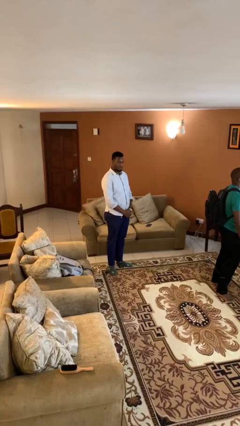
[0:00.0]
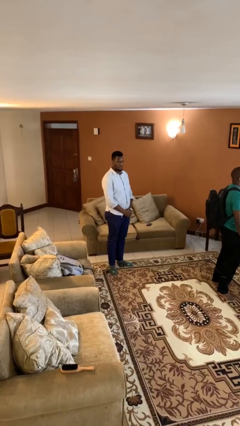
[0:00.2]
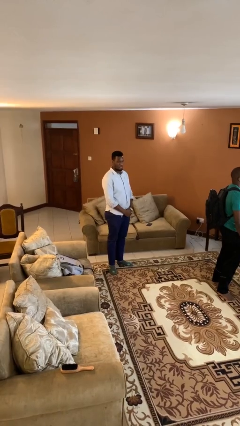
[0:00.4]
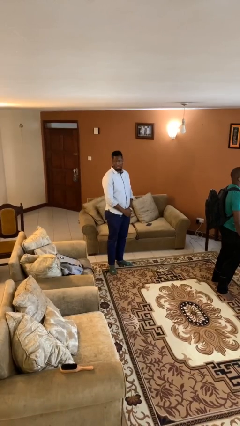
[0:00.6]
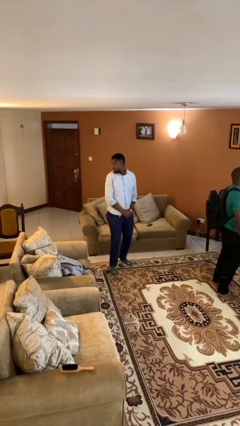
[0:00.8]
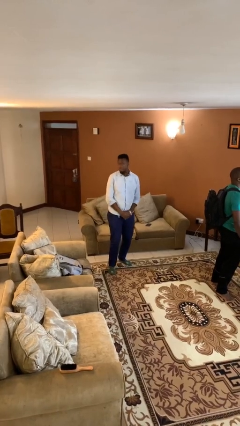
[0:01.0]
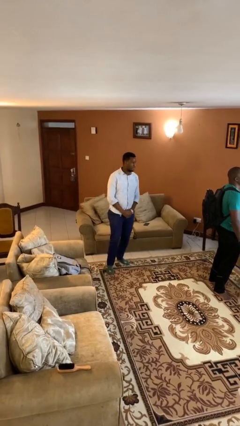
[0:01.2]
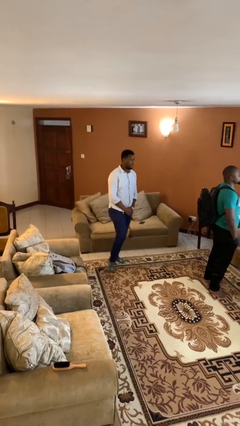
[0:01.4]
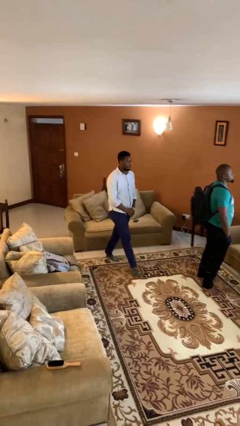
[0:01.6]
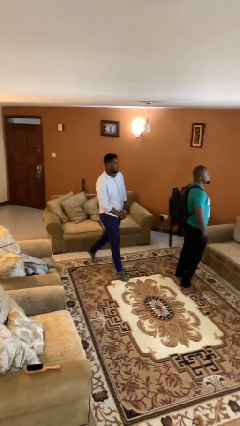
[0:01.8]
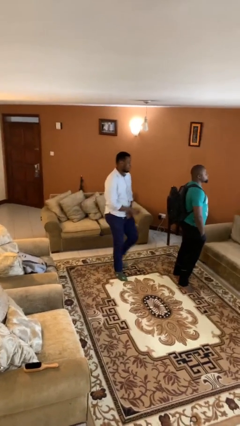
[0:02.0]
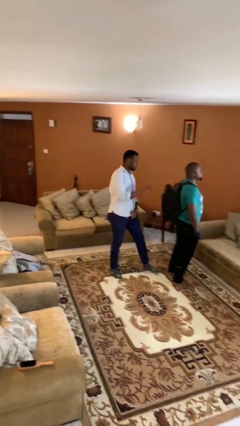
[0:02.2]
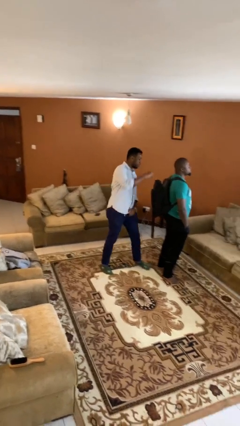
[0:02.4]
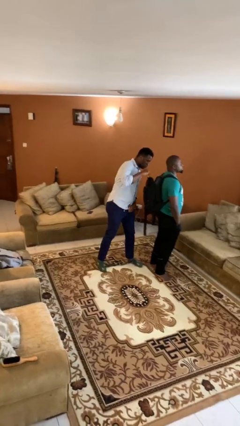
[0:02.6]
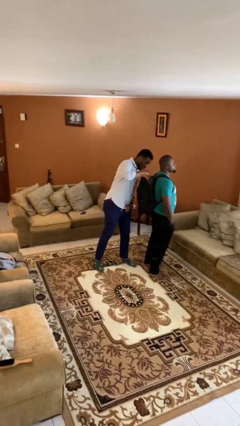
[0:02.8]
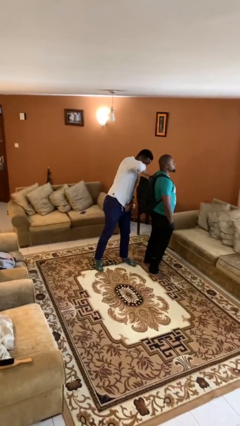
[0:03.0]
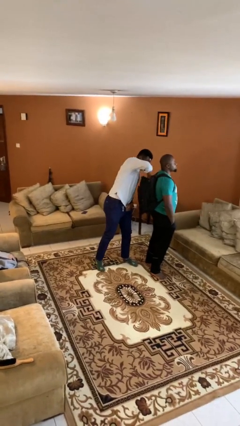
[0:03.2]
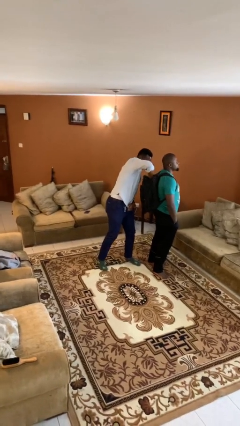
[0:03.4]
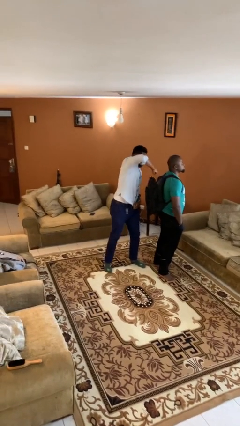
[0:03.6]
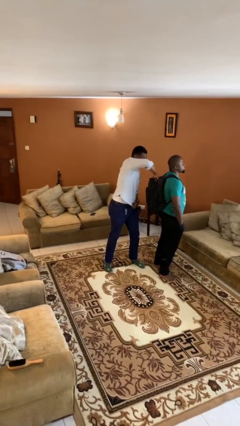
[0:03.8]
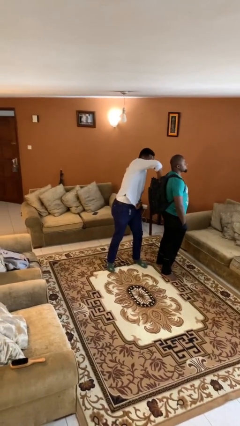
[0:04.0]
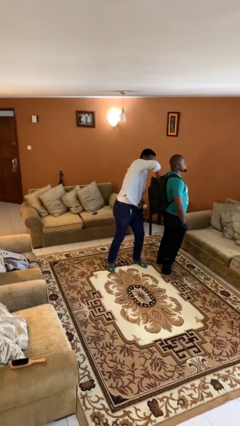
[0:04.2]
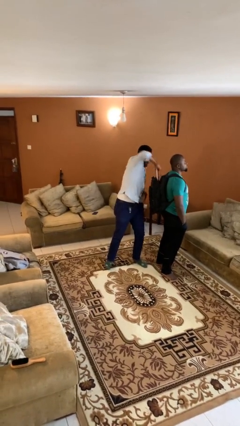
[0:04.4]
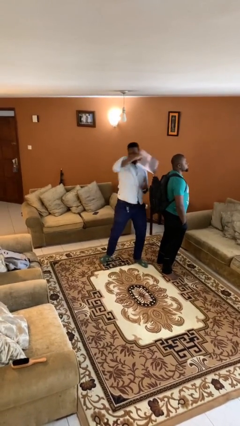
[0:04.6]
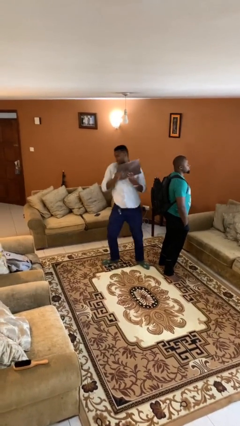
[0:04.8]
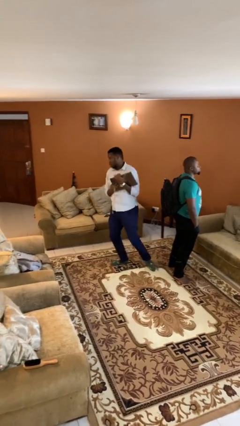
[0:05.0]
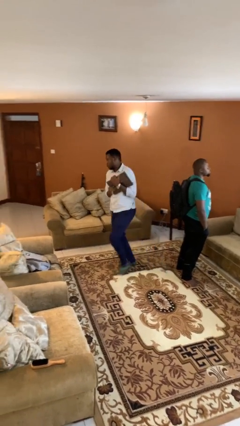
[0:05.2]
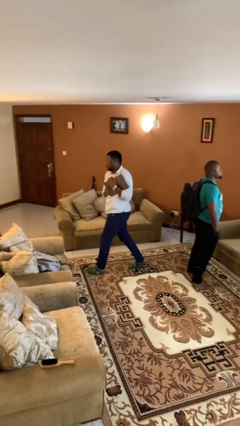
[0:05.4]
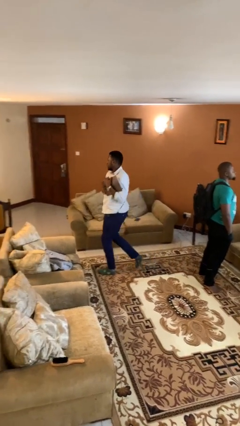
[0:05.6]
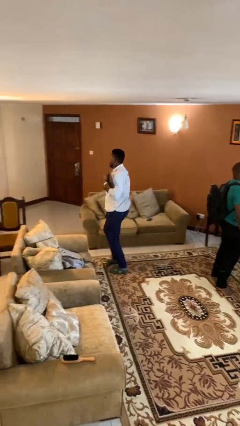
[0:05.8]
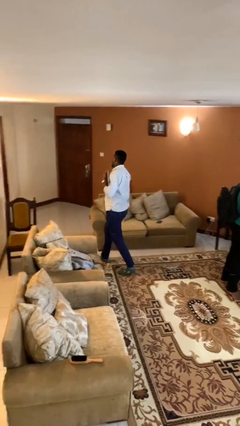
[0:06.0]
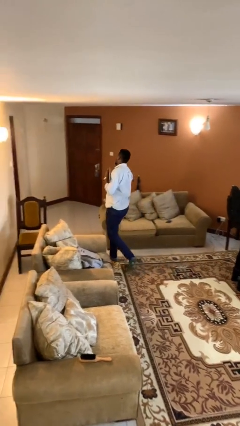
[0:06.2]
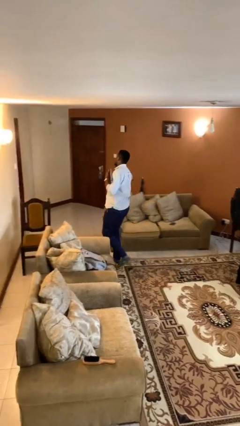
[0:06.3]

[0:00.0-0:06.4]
person steals object from person

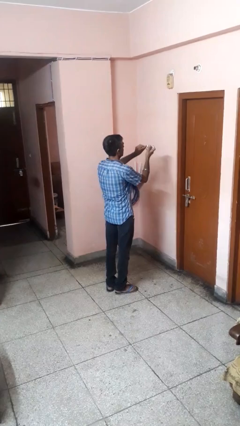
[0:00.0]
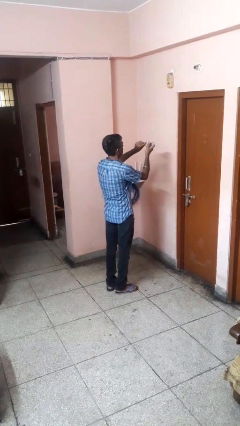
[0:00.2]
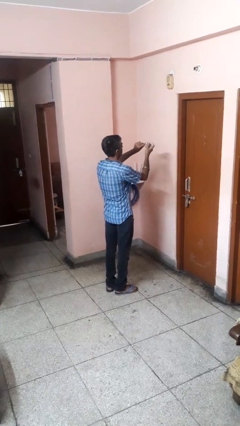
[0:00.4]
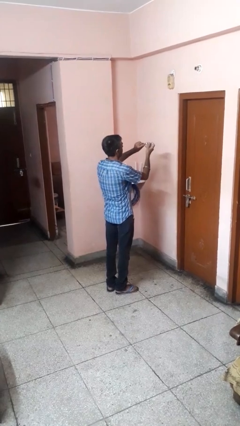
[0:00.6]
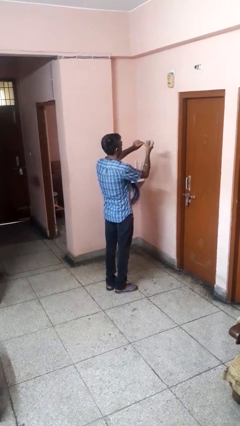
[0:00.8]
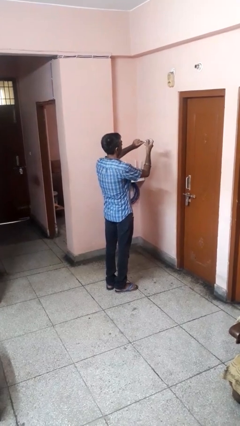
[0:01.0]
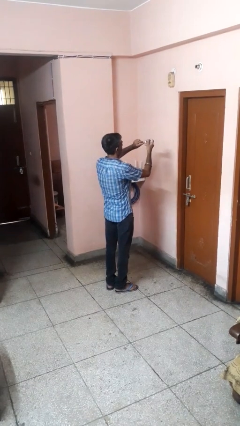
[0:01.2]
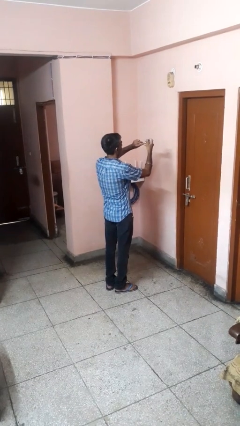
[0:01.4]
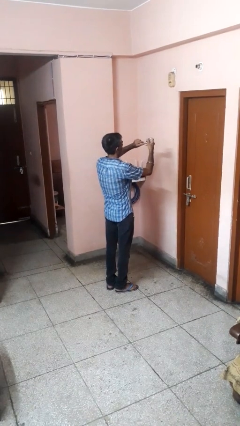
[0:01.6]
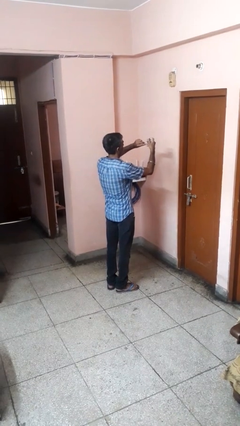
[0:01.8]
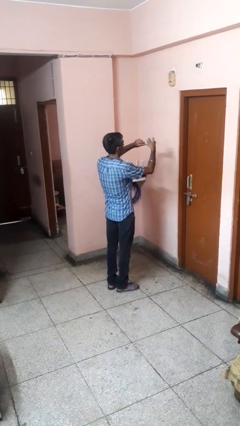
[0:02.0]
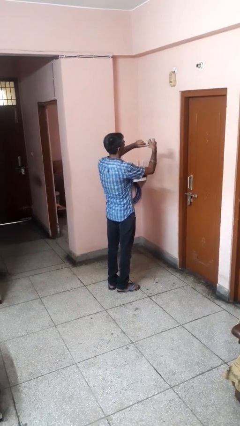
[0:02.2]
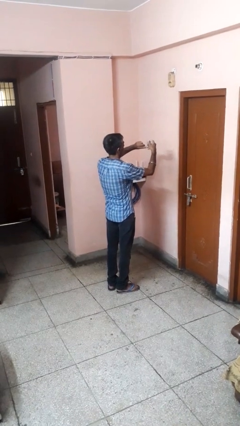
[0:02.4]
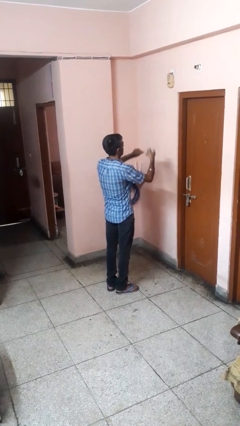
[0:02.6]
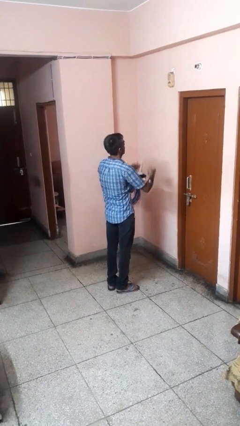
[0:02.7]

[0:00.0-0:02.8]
person clips fingernails

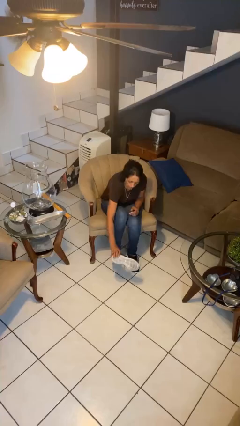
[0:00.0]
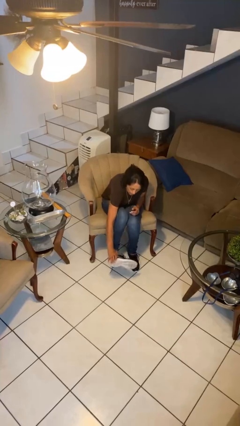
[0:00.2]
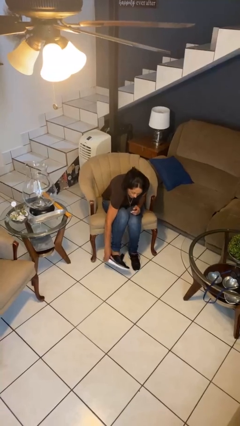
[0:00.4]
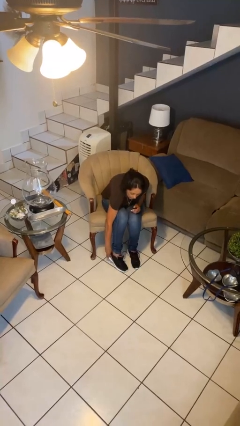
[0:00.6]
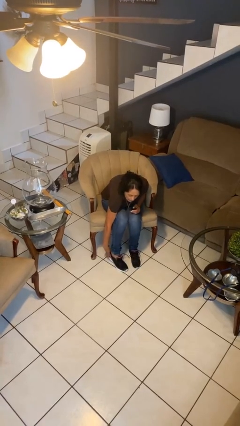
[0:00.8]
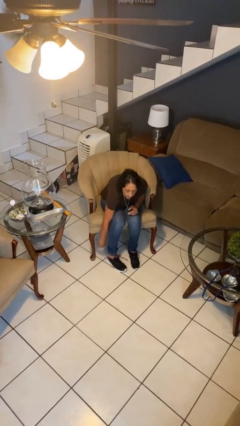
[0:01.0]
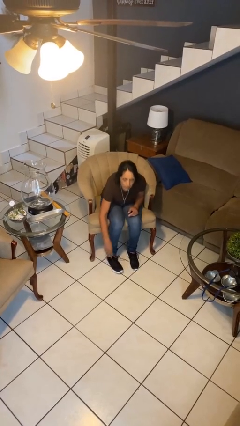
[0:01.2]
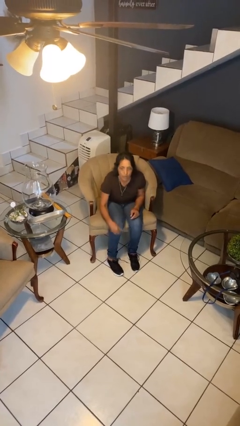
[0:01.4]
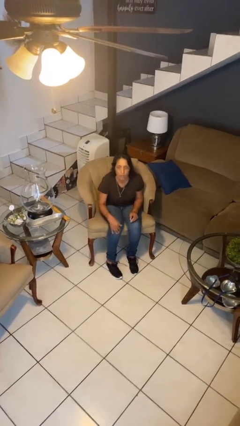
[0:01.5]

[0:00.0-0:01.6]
person puts on shoes

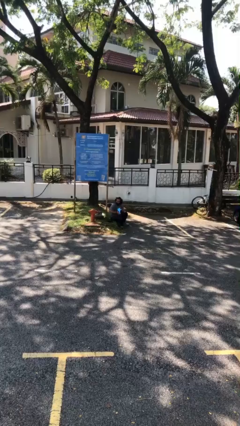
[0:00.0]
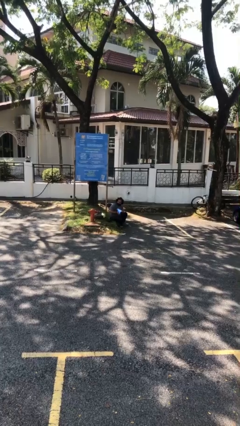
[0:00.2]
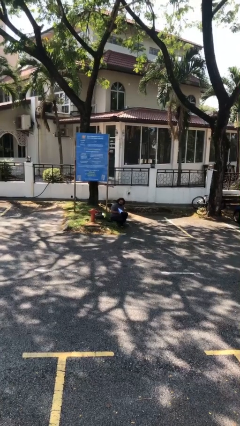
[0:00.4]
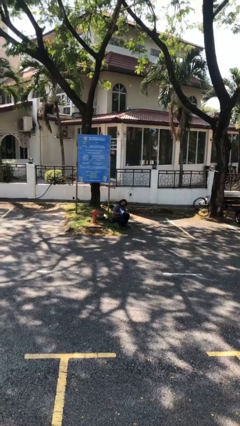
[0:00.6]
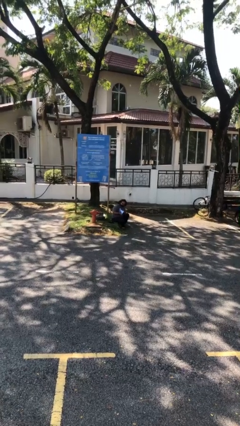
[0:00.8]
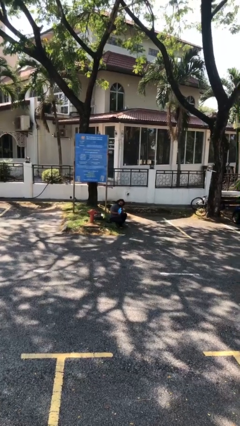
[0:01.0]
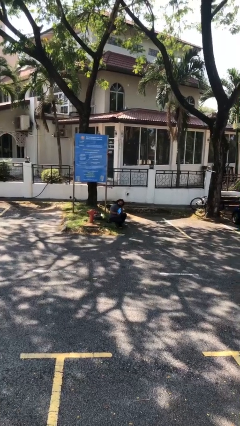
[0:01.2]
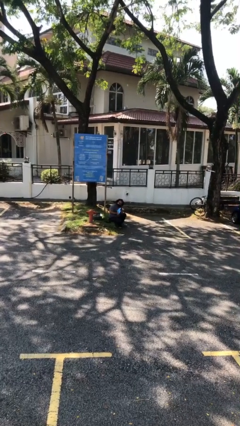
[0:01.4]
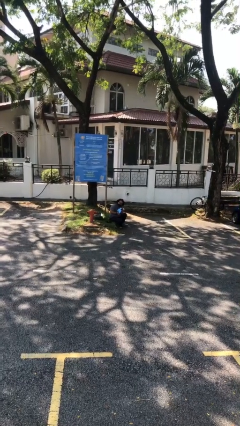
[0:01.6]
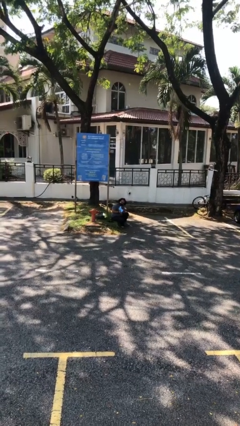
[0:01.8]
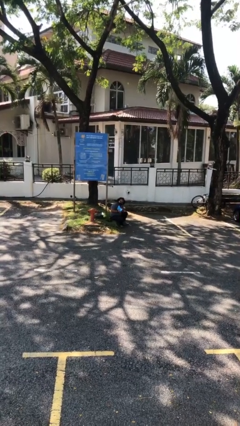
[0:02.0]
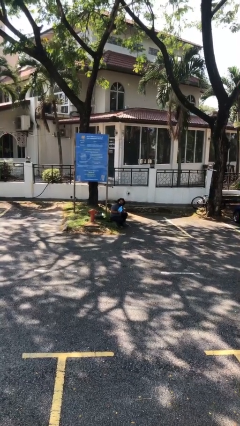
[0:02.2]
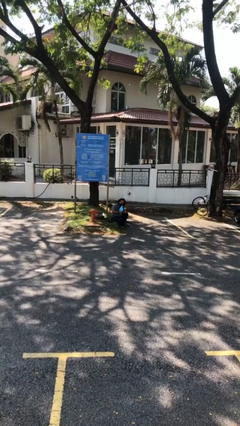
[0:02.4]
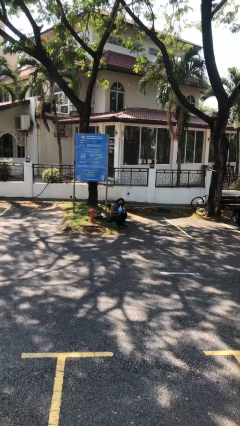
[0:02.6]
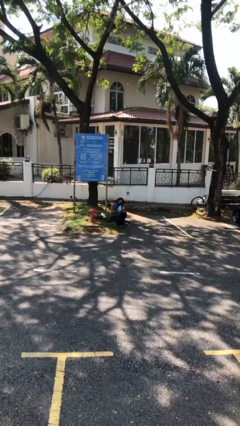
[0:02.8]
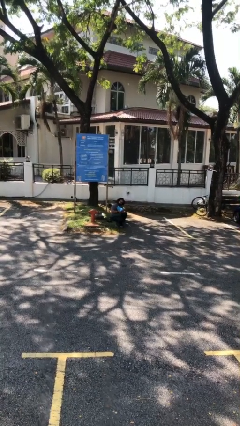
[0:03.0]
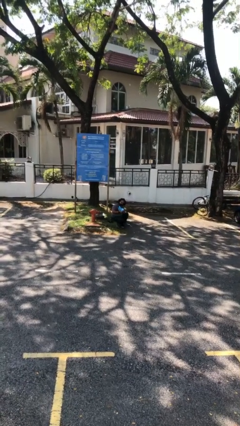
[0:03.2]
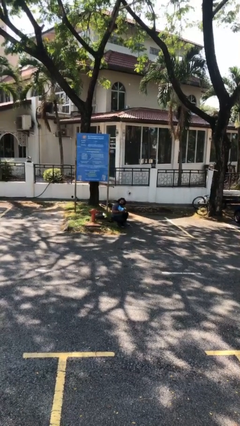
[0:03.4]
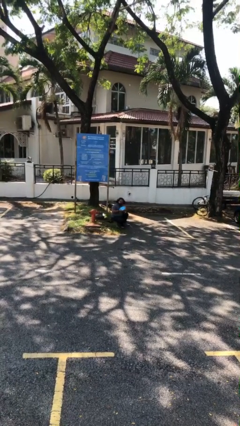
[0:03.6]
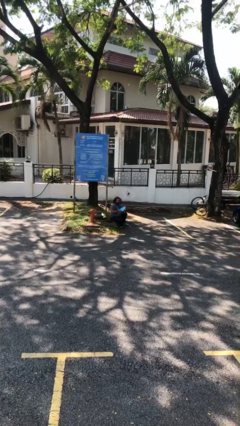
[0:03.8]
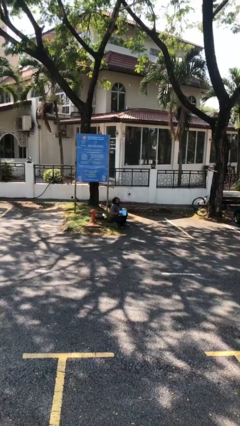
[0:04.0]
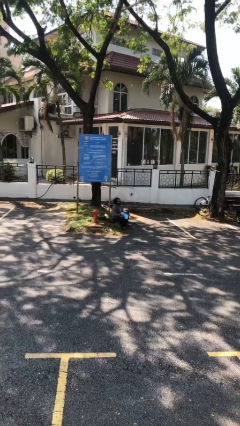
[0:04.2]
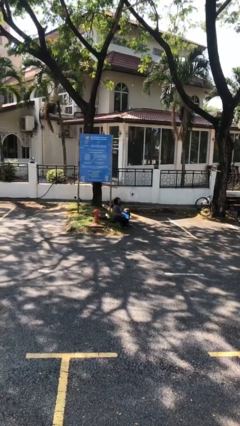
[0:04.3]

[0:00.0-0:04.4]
person reads document

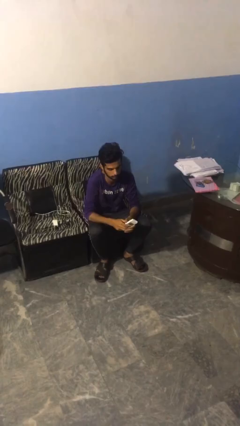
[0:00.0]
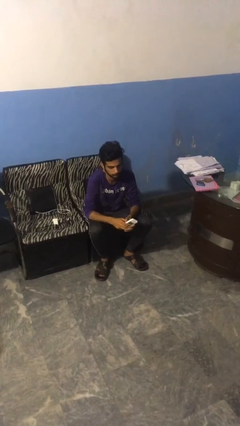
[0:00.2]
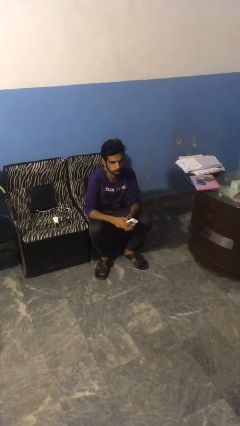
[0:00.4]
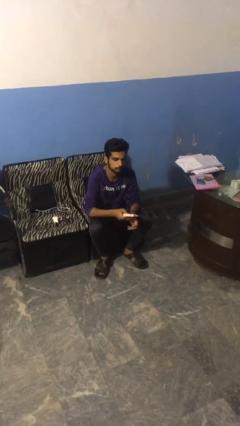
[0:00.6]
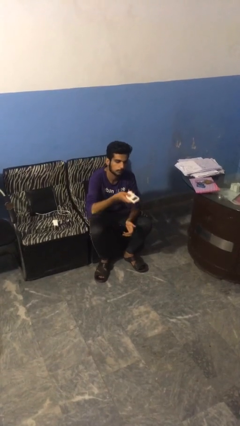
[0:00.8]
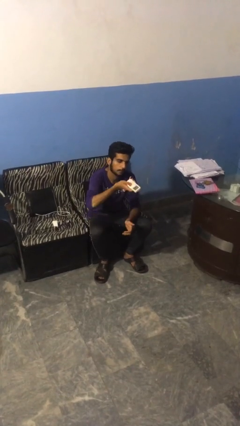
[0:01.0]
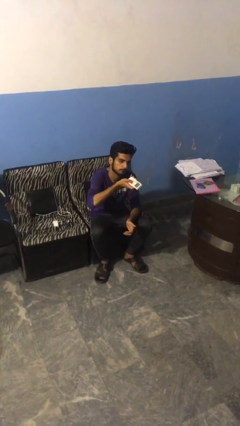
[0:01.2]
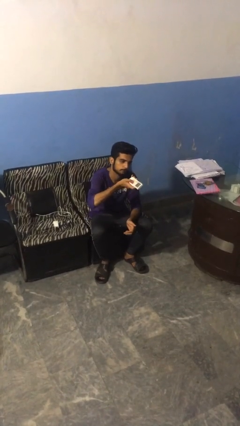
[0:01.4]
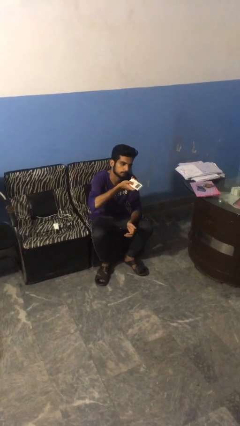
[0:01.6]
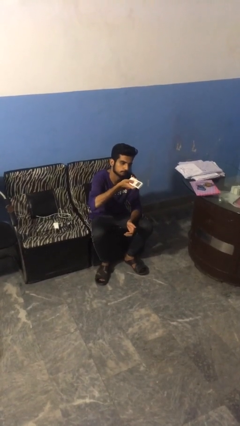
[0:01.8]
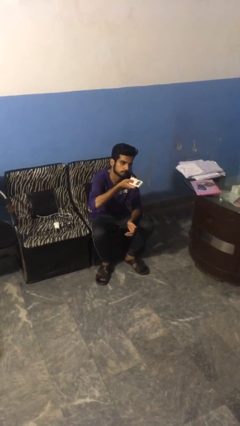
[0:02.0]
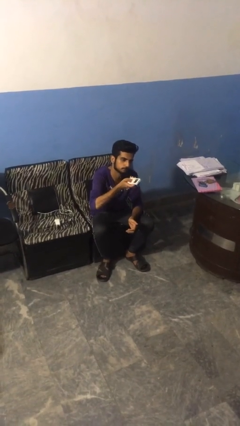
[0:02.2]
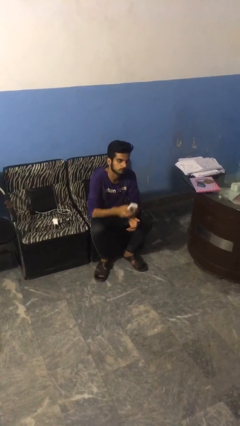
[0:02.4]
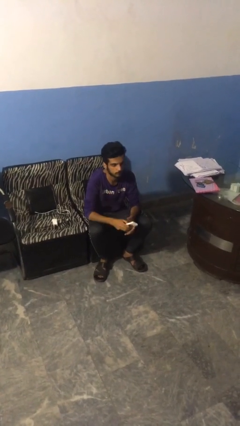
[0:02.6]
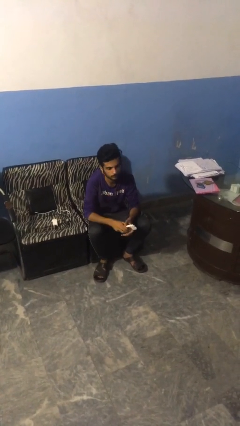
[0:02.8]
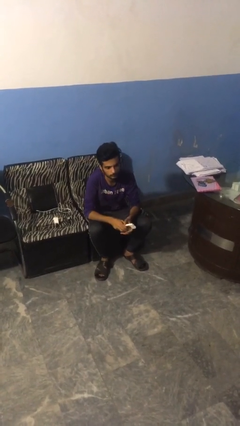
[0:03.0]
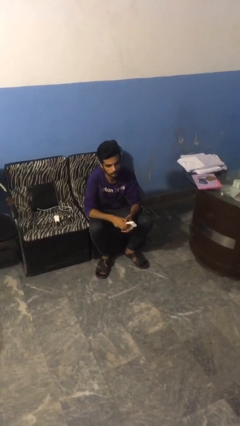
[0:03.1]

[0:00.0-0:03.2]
person uses television remote
